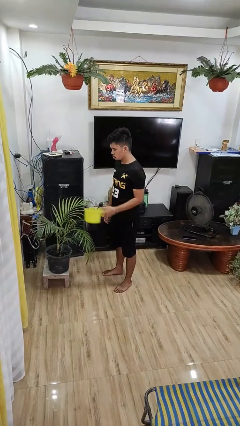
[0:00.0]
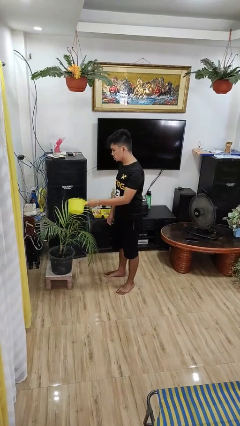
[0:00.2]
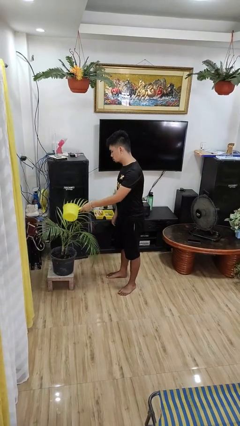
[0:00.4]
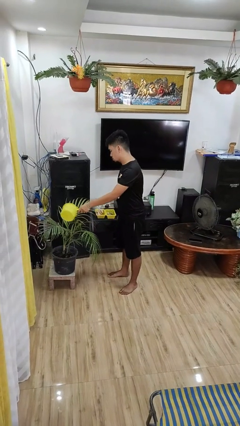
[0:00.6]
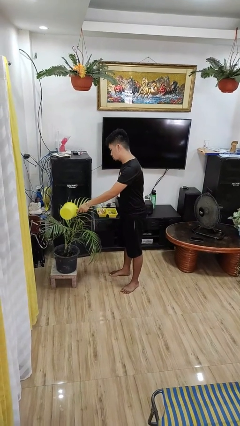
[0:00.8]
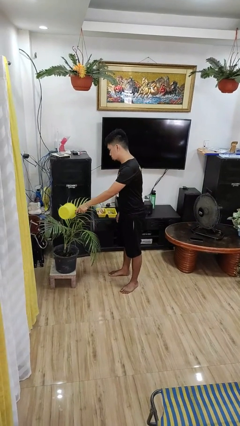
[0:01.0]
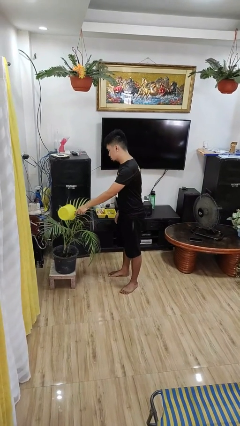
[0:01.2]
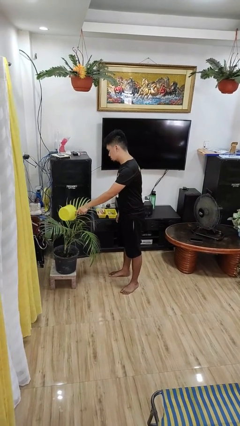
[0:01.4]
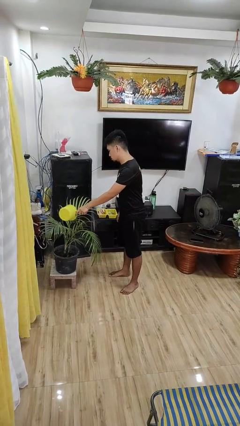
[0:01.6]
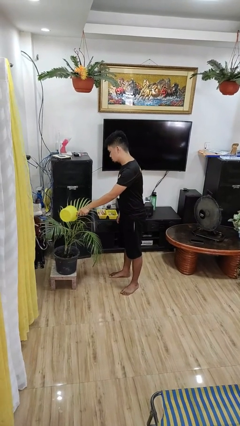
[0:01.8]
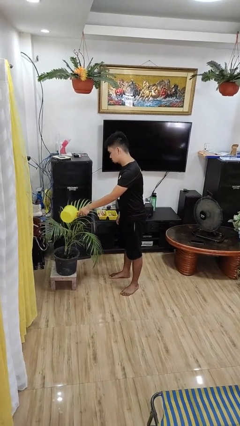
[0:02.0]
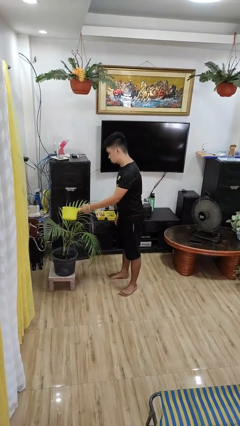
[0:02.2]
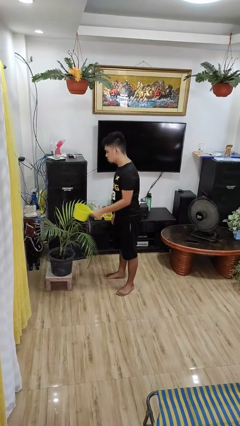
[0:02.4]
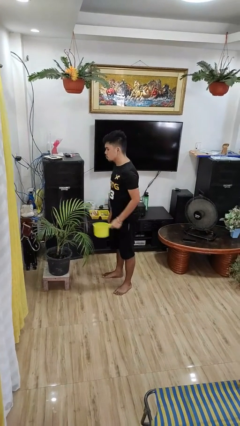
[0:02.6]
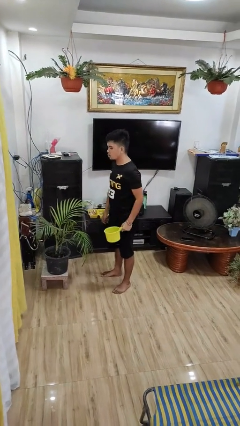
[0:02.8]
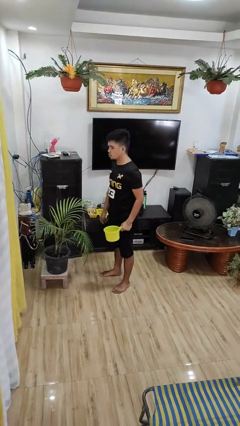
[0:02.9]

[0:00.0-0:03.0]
person waters houseplant

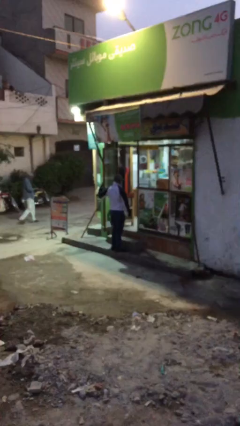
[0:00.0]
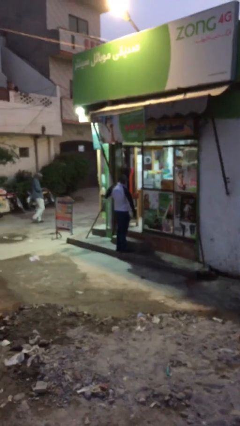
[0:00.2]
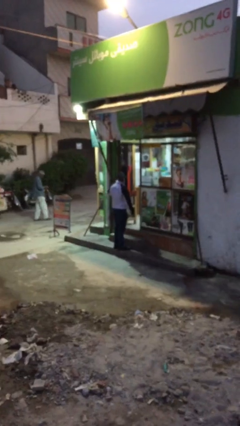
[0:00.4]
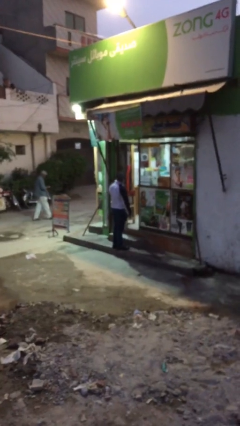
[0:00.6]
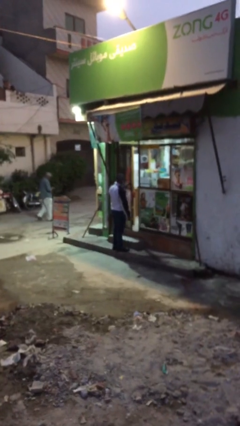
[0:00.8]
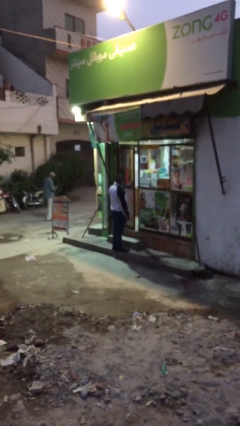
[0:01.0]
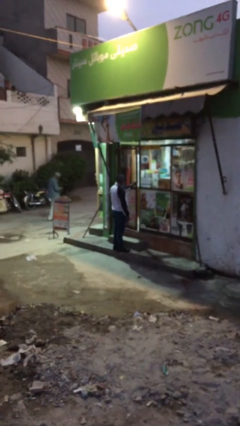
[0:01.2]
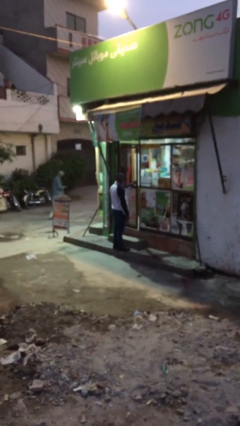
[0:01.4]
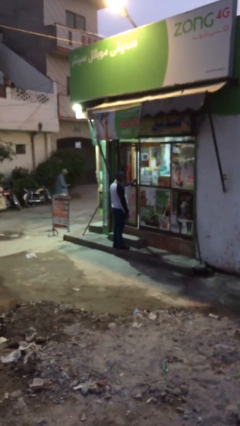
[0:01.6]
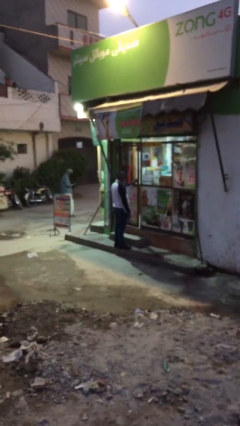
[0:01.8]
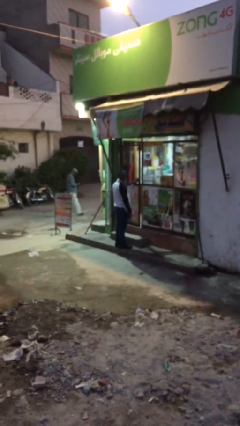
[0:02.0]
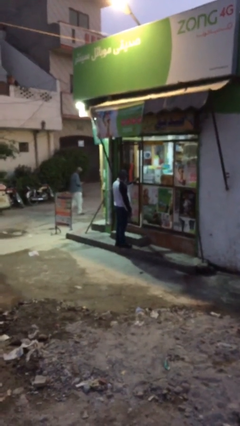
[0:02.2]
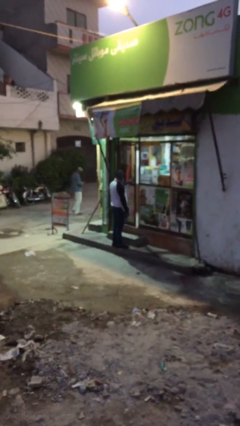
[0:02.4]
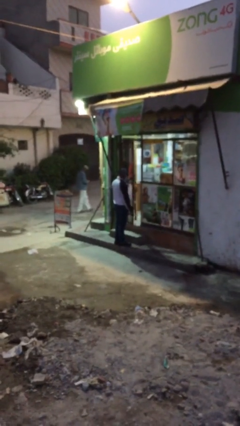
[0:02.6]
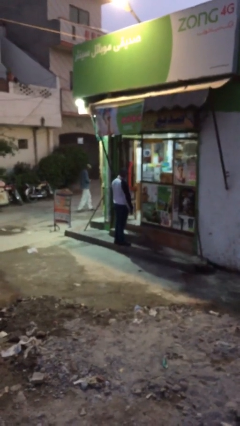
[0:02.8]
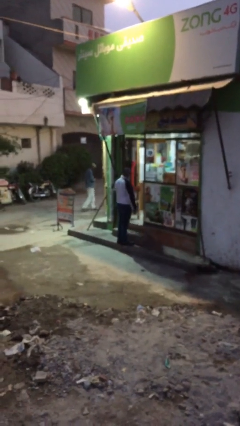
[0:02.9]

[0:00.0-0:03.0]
person closes facility door

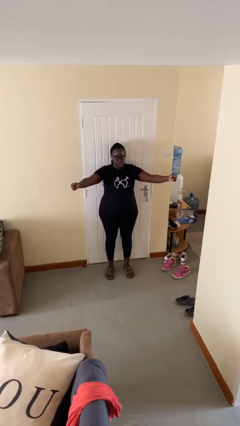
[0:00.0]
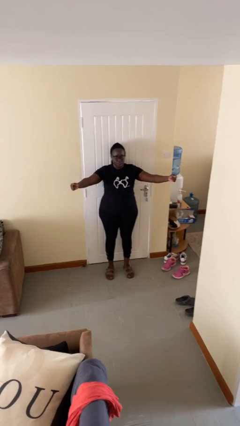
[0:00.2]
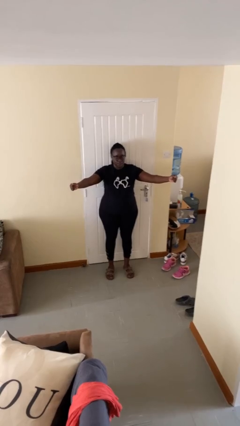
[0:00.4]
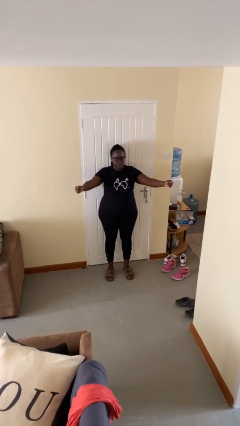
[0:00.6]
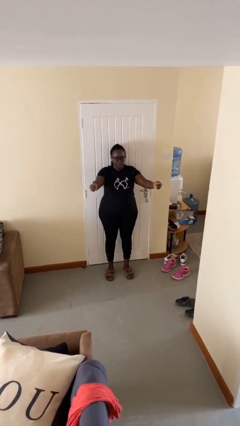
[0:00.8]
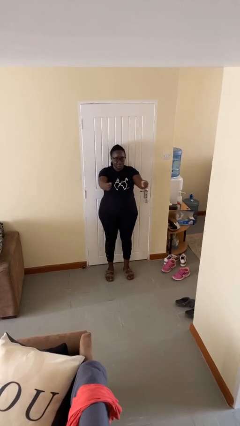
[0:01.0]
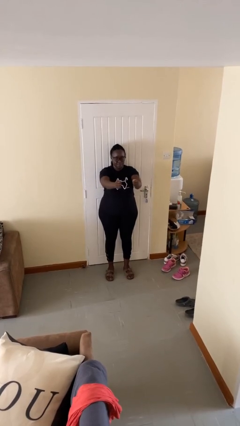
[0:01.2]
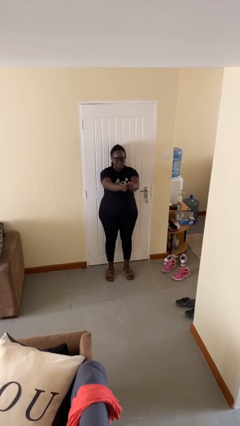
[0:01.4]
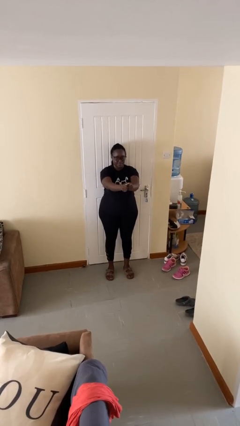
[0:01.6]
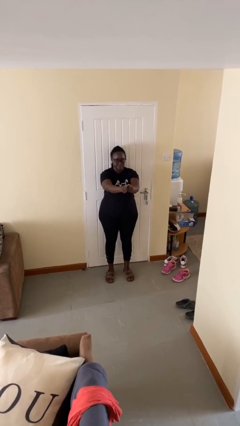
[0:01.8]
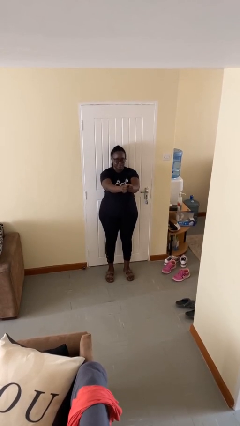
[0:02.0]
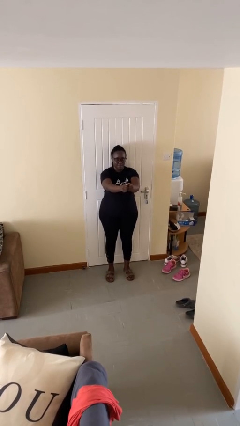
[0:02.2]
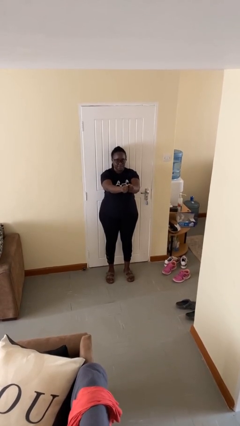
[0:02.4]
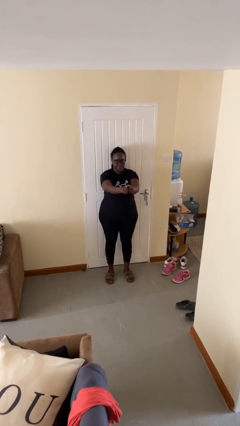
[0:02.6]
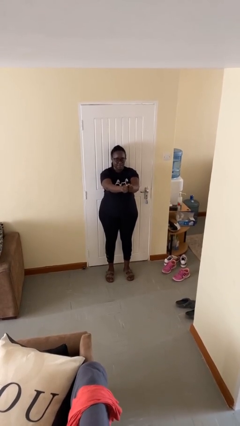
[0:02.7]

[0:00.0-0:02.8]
person gestures zoom out

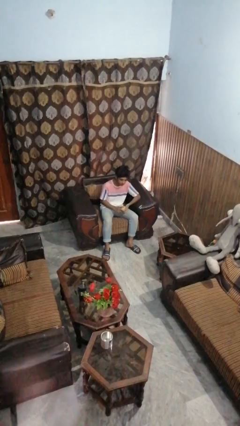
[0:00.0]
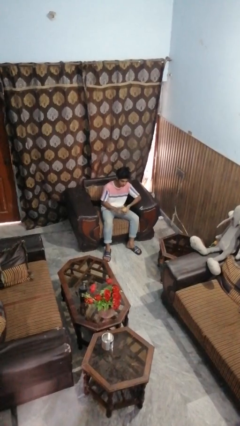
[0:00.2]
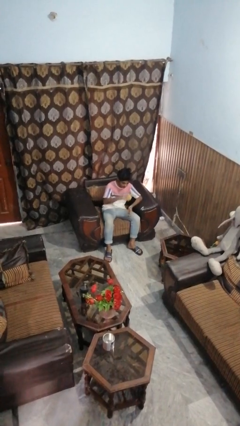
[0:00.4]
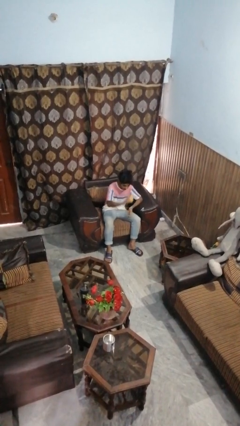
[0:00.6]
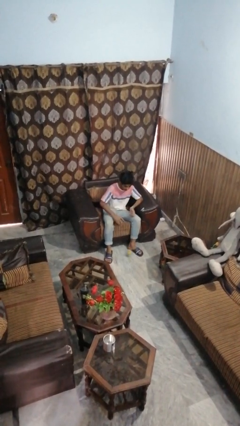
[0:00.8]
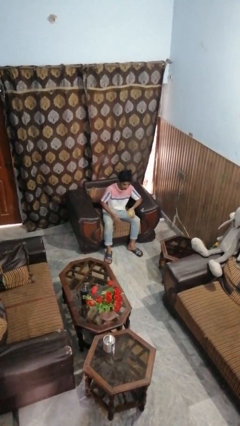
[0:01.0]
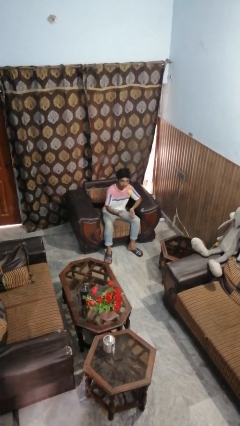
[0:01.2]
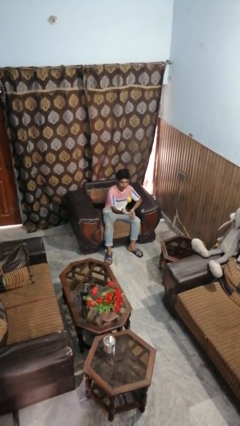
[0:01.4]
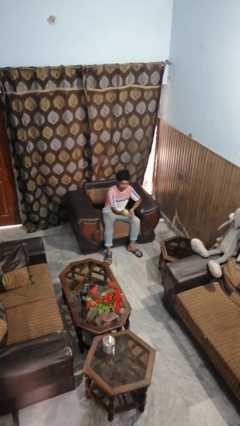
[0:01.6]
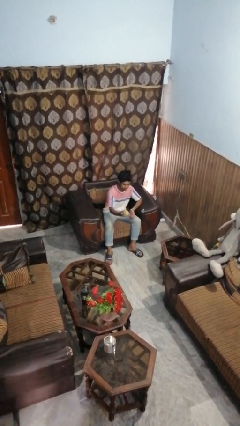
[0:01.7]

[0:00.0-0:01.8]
person bounces ball on floor

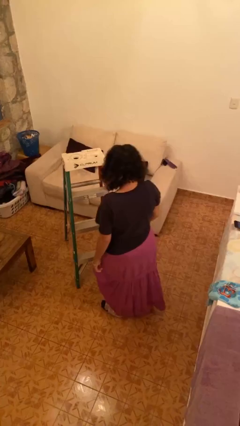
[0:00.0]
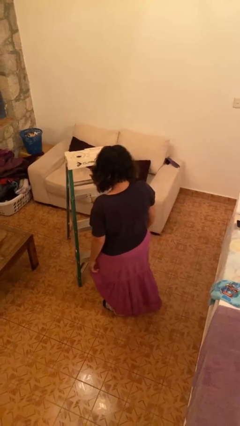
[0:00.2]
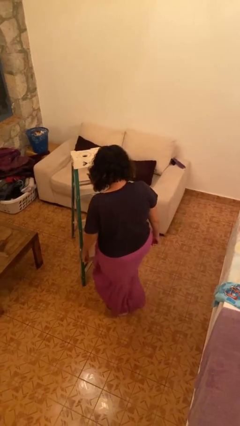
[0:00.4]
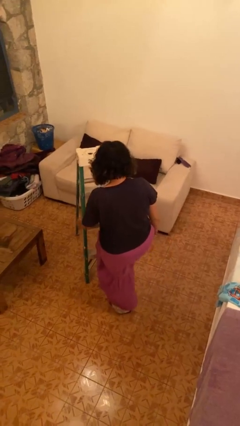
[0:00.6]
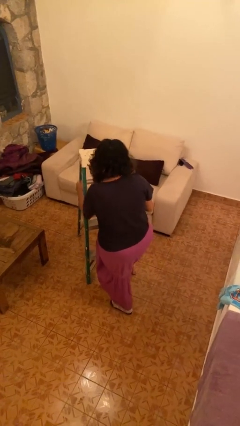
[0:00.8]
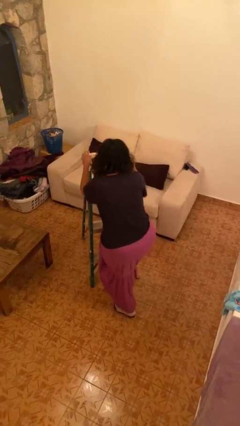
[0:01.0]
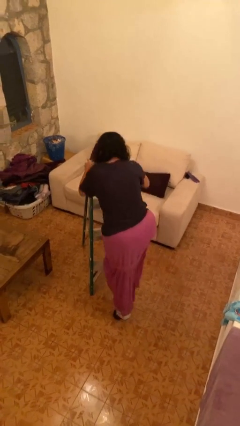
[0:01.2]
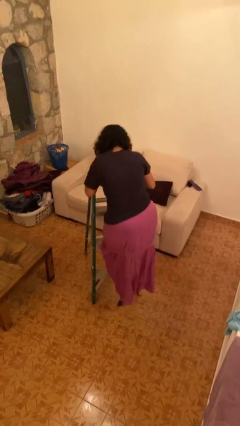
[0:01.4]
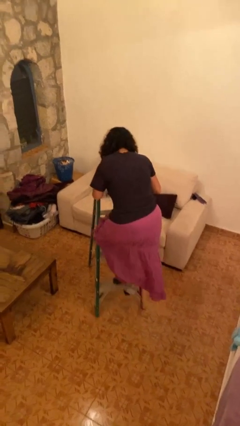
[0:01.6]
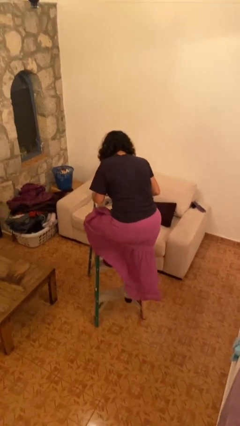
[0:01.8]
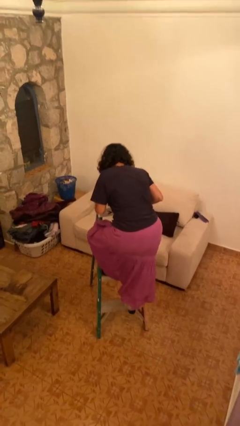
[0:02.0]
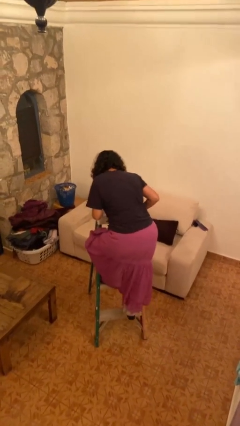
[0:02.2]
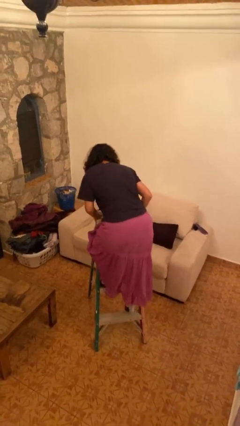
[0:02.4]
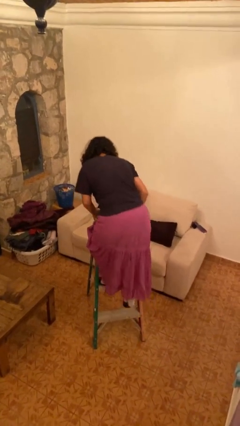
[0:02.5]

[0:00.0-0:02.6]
person climbs up ladder
